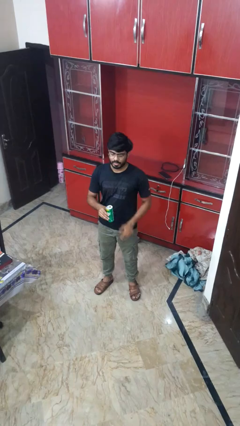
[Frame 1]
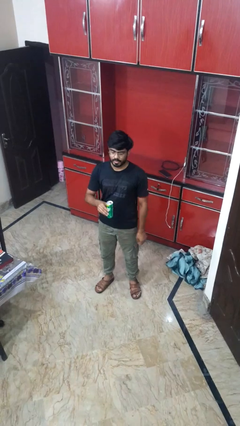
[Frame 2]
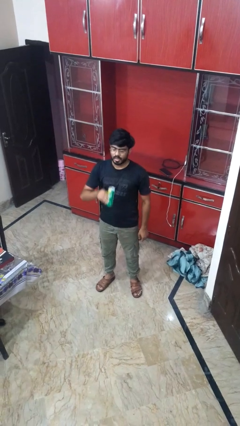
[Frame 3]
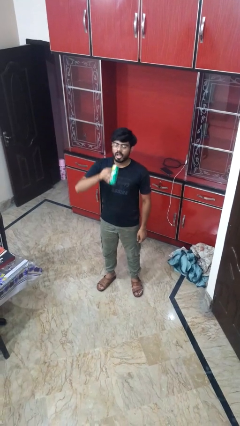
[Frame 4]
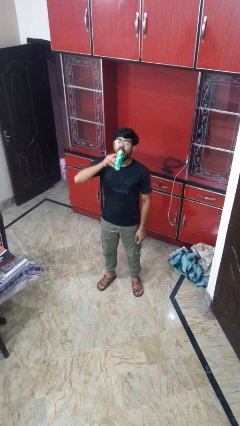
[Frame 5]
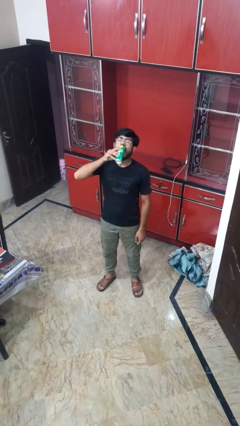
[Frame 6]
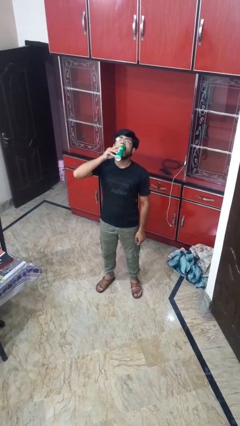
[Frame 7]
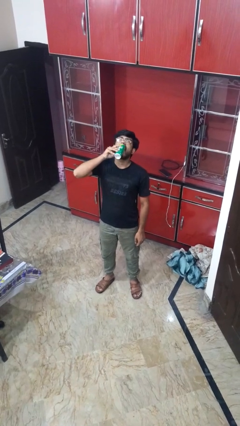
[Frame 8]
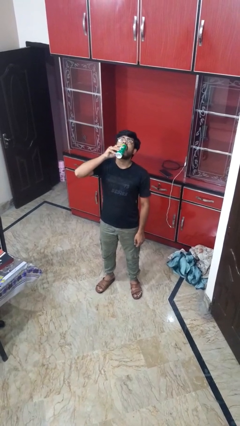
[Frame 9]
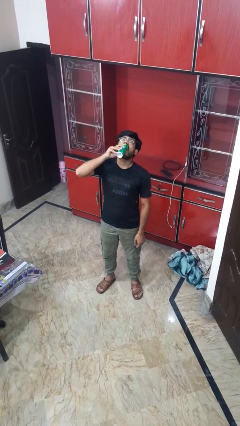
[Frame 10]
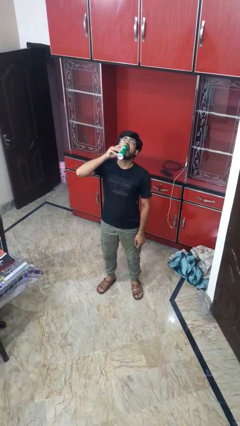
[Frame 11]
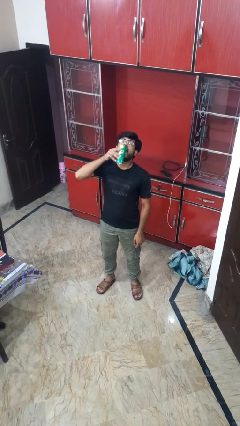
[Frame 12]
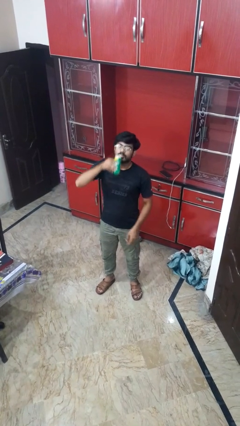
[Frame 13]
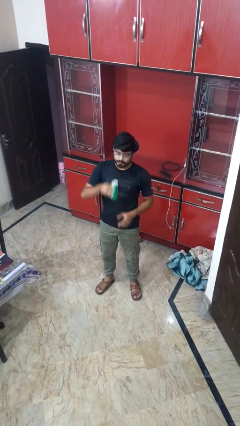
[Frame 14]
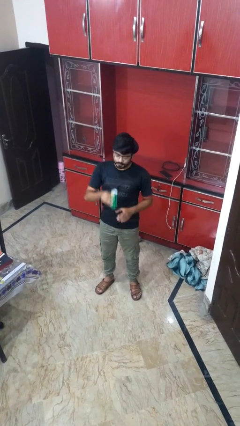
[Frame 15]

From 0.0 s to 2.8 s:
person drinks from beverage can

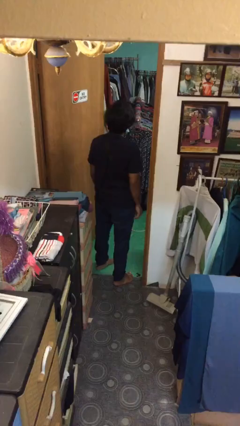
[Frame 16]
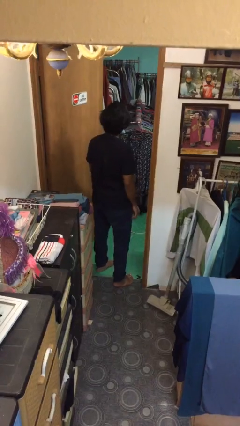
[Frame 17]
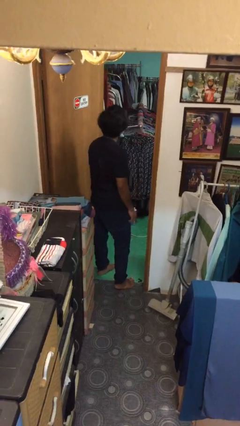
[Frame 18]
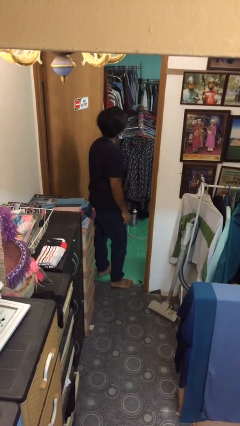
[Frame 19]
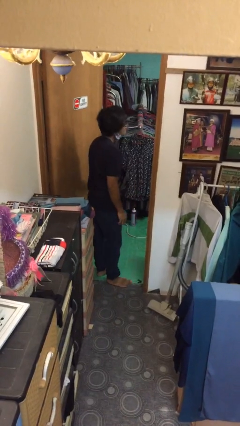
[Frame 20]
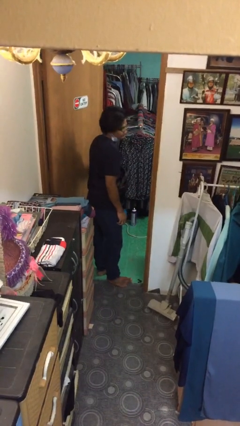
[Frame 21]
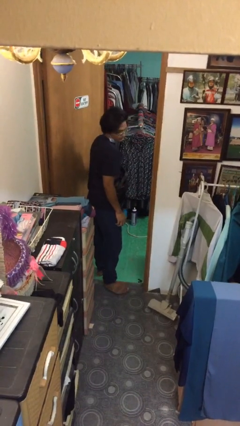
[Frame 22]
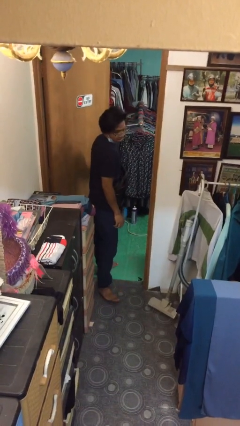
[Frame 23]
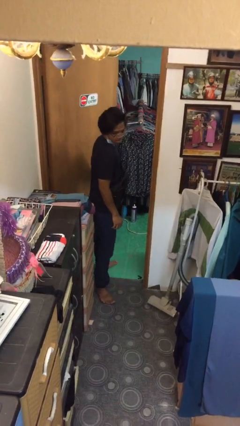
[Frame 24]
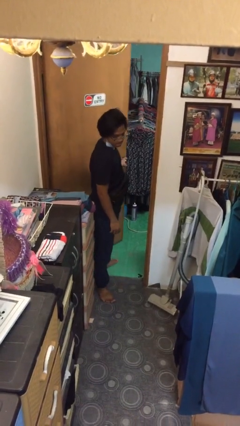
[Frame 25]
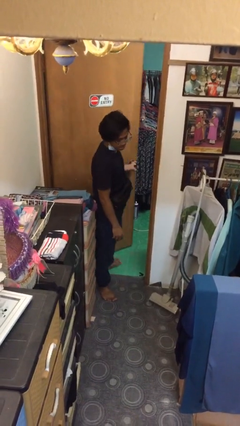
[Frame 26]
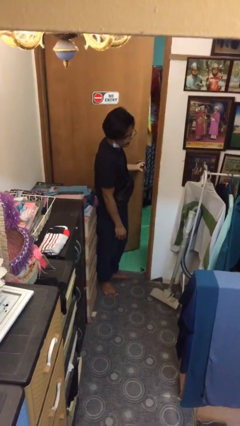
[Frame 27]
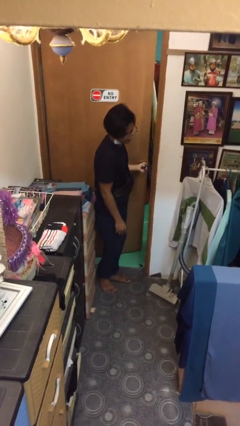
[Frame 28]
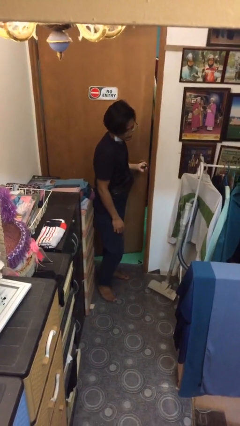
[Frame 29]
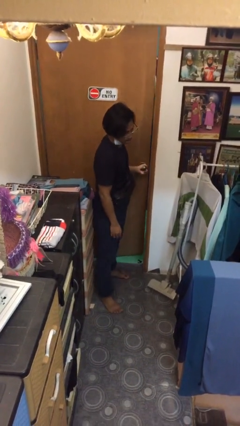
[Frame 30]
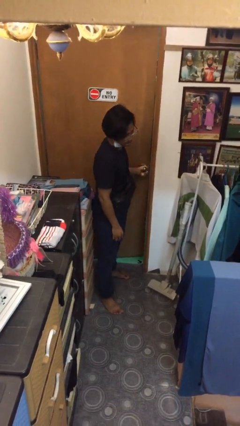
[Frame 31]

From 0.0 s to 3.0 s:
person closes facility door

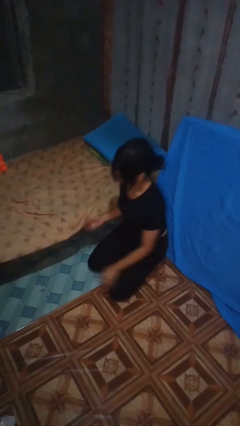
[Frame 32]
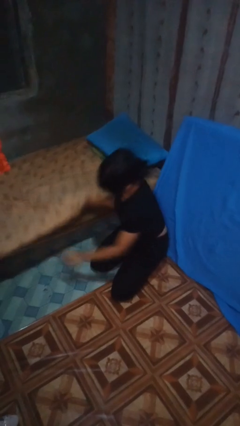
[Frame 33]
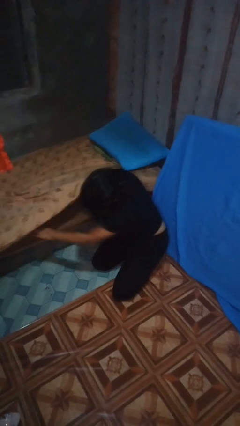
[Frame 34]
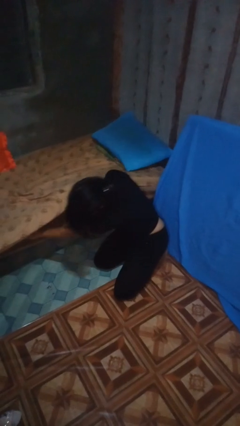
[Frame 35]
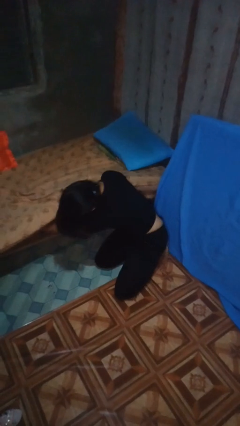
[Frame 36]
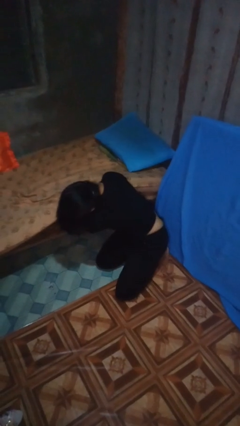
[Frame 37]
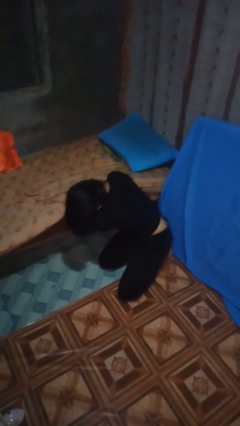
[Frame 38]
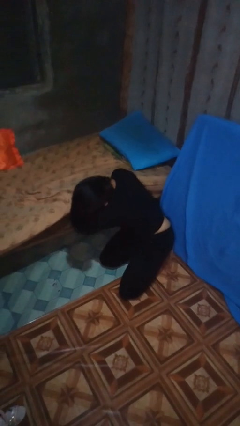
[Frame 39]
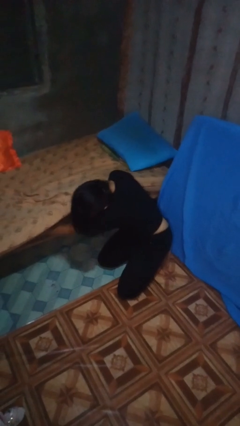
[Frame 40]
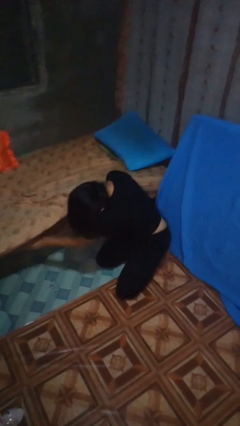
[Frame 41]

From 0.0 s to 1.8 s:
person searches under bed

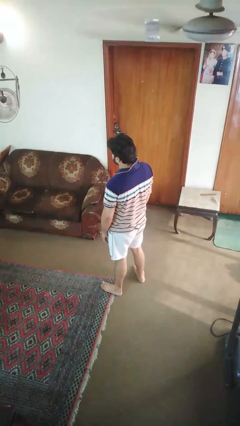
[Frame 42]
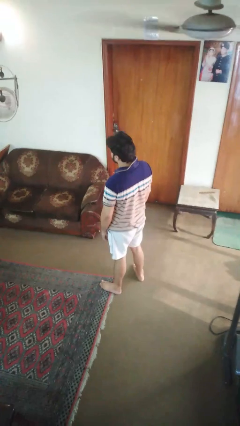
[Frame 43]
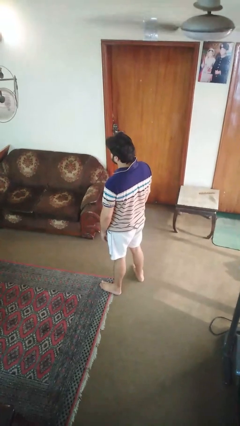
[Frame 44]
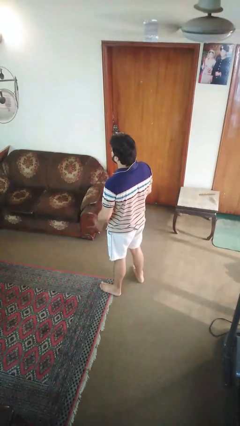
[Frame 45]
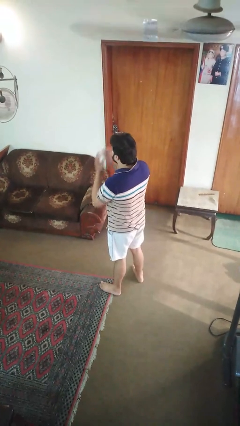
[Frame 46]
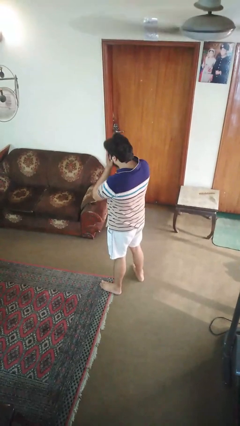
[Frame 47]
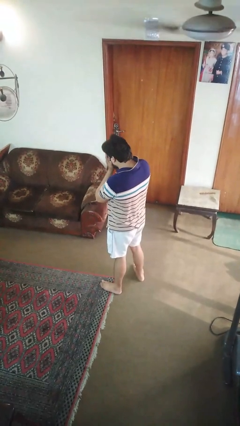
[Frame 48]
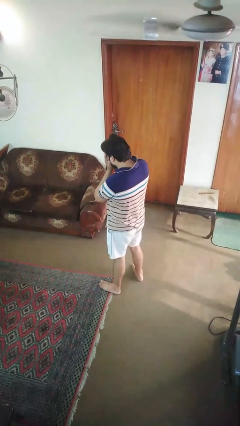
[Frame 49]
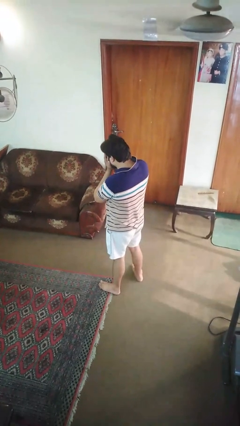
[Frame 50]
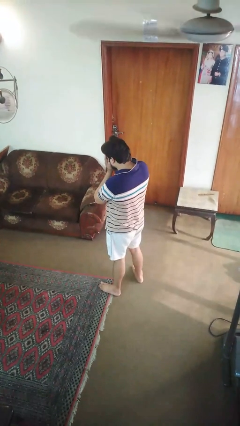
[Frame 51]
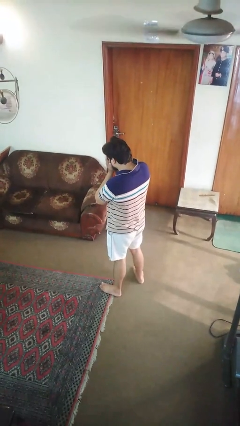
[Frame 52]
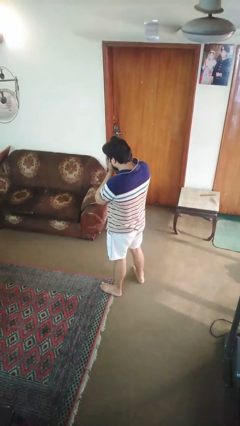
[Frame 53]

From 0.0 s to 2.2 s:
person sneezes into hand

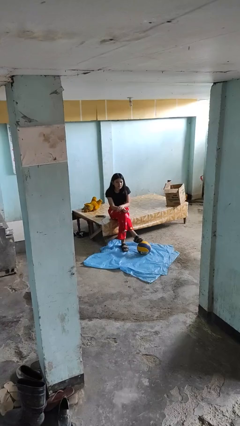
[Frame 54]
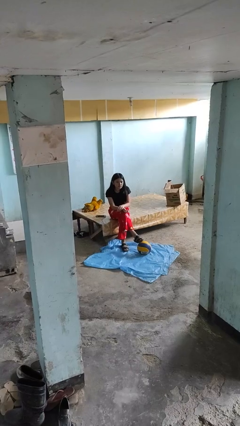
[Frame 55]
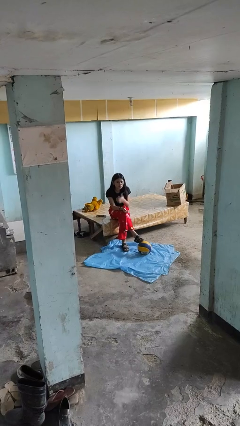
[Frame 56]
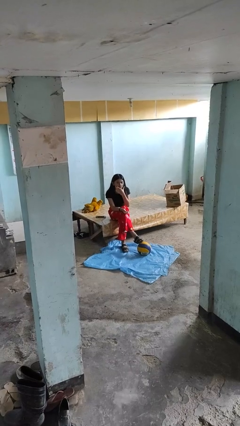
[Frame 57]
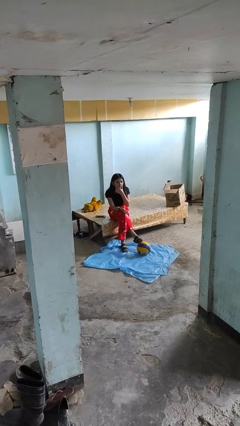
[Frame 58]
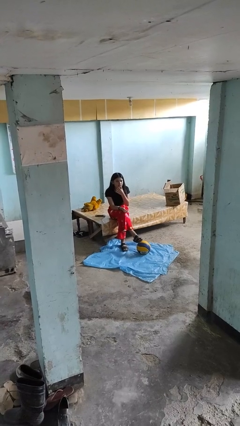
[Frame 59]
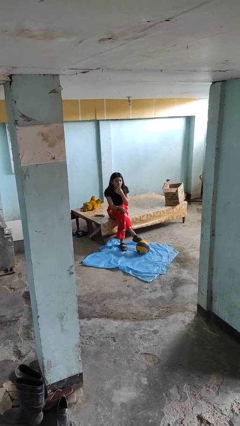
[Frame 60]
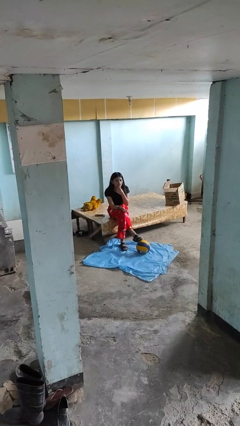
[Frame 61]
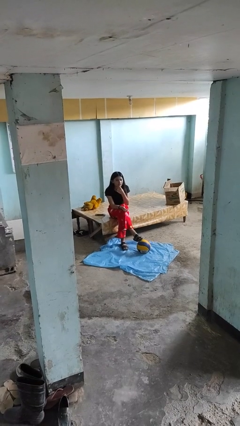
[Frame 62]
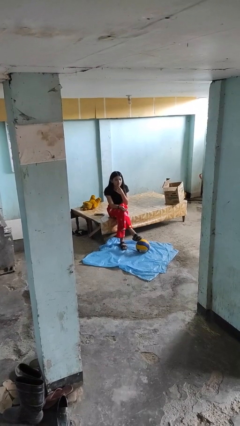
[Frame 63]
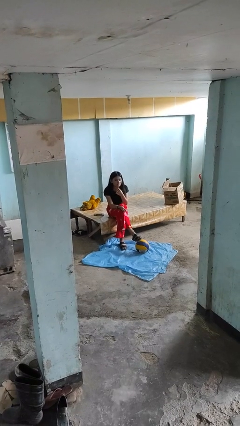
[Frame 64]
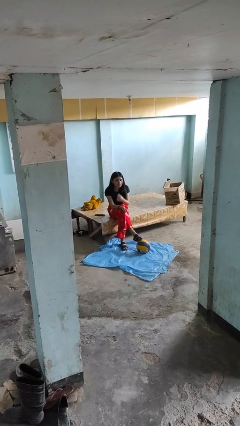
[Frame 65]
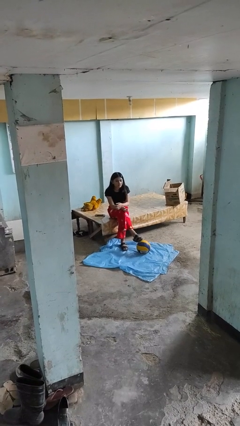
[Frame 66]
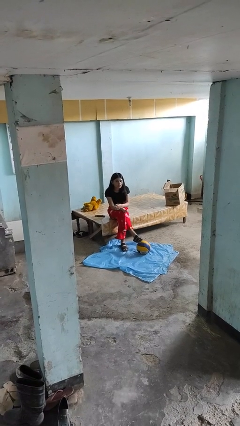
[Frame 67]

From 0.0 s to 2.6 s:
person strokes chin

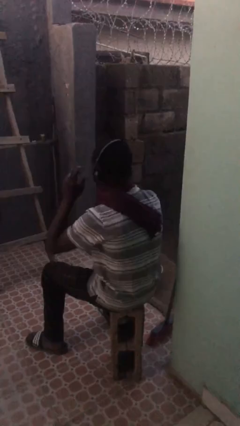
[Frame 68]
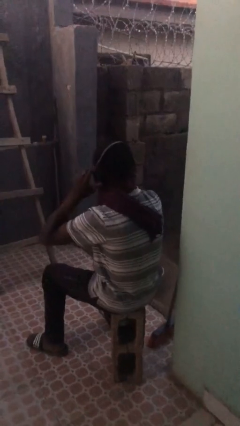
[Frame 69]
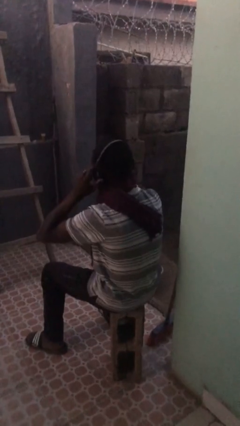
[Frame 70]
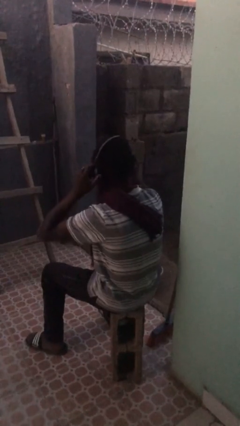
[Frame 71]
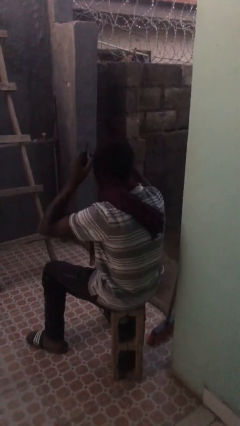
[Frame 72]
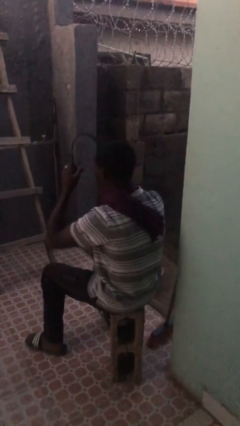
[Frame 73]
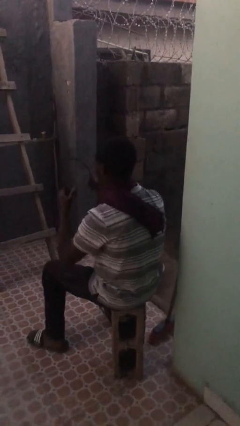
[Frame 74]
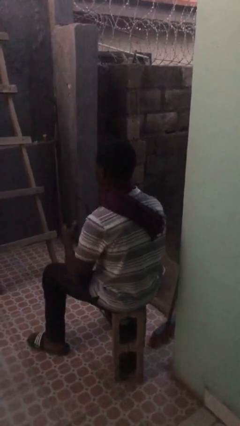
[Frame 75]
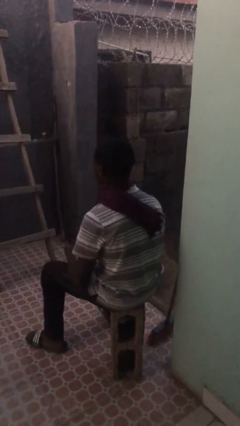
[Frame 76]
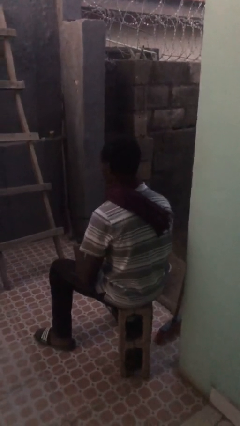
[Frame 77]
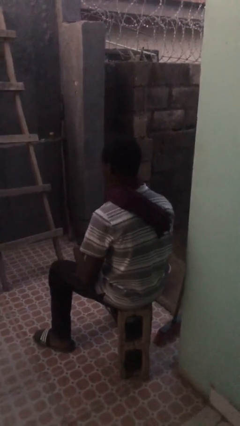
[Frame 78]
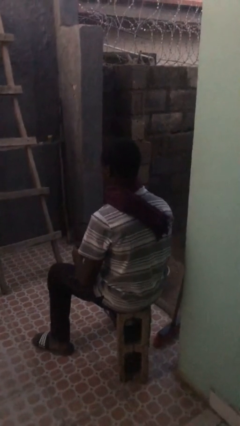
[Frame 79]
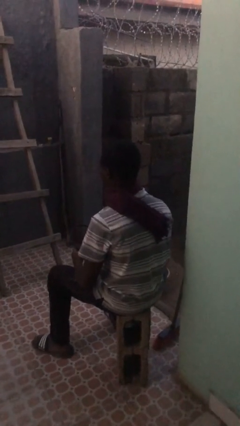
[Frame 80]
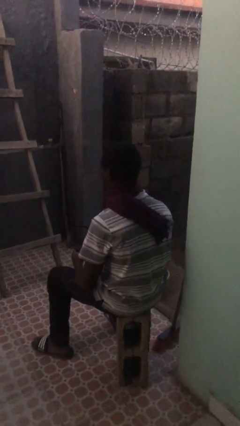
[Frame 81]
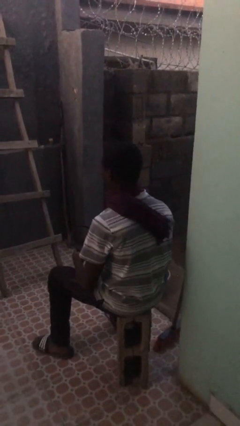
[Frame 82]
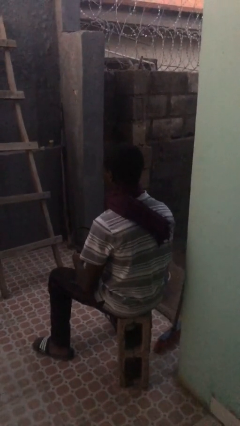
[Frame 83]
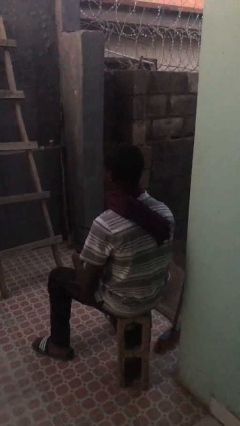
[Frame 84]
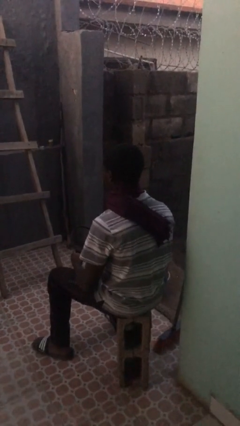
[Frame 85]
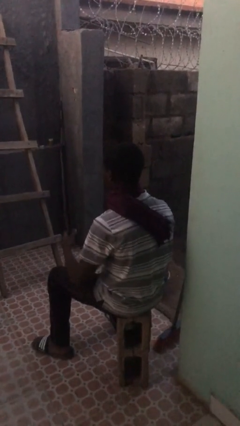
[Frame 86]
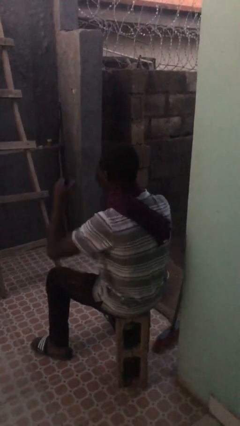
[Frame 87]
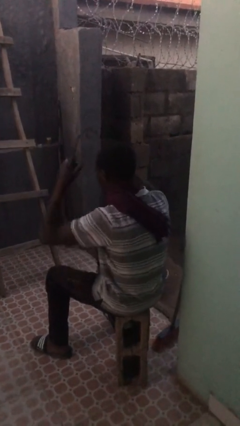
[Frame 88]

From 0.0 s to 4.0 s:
person takes off headphones

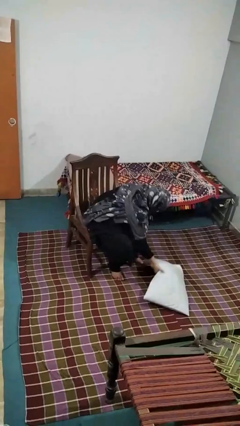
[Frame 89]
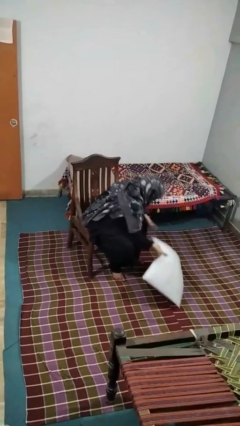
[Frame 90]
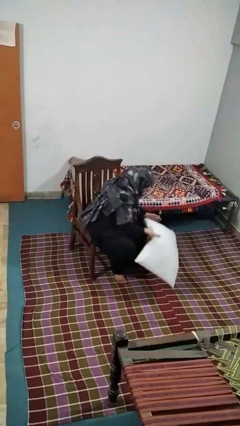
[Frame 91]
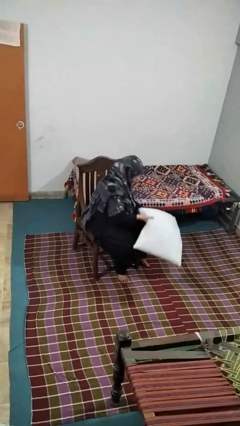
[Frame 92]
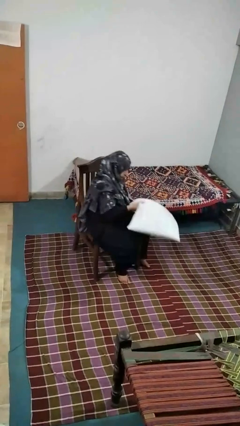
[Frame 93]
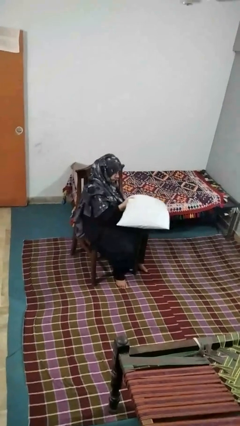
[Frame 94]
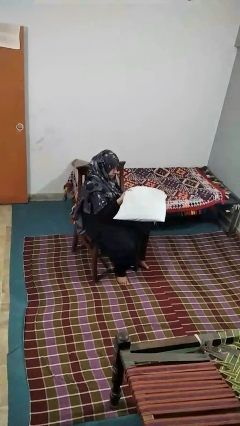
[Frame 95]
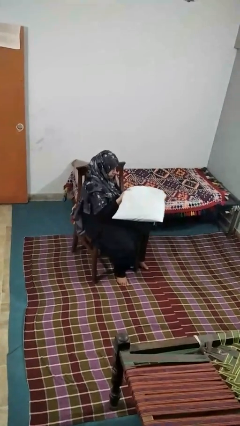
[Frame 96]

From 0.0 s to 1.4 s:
person picks up object from floor
